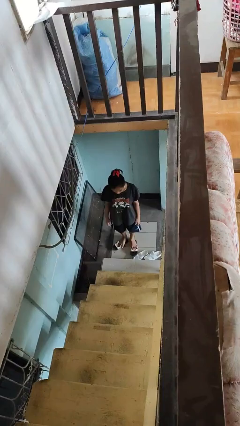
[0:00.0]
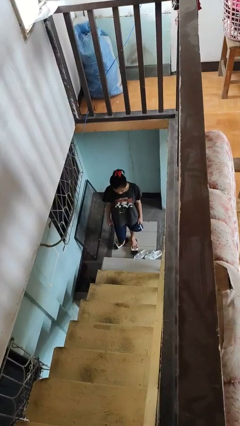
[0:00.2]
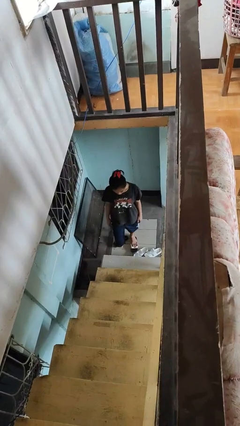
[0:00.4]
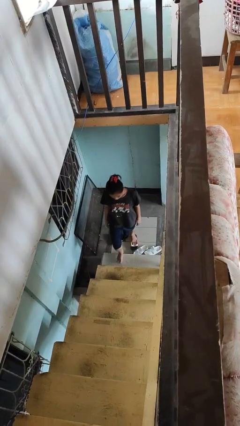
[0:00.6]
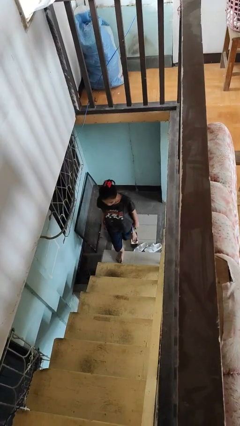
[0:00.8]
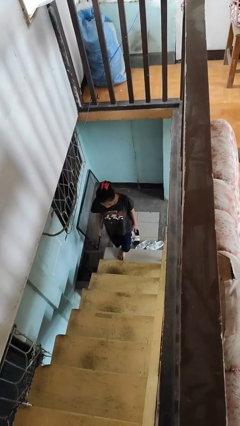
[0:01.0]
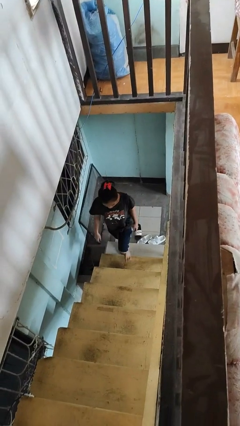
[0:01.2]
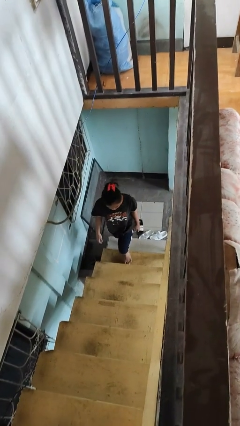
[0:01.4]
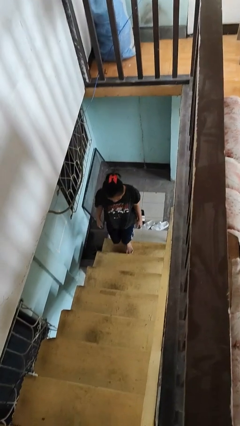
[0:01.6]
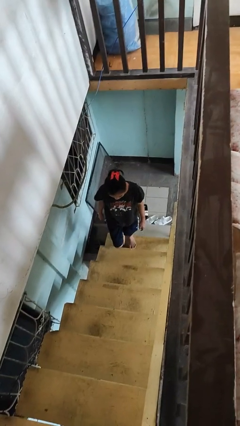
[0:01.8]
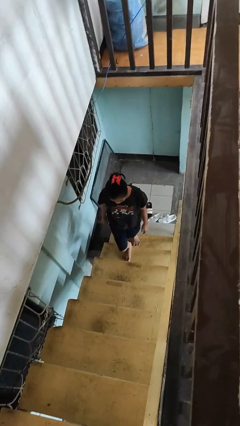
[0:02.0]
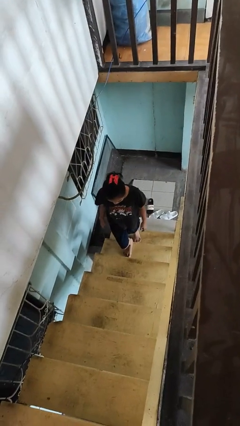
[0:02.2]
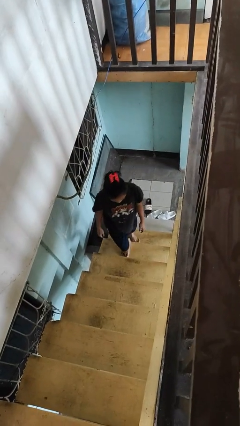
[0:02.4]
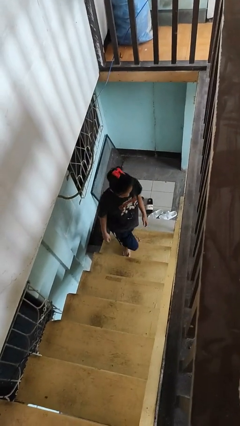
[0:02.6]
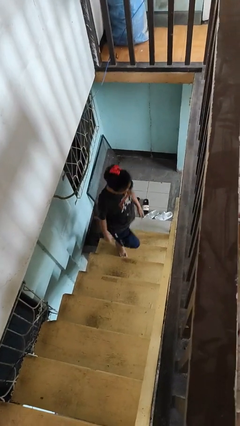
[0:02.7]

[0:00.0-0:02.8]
person climbs up stairs

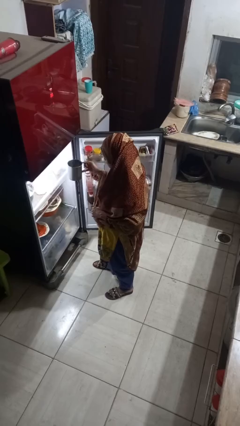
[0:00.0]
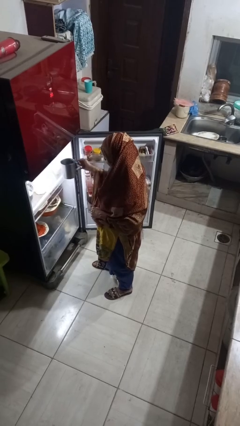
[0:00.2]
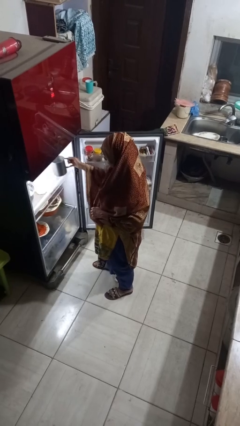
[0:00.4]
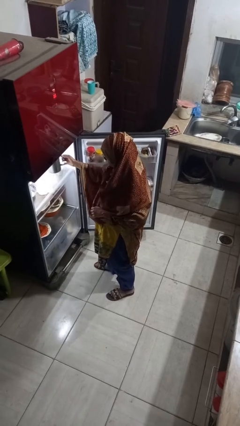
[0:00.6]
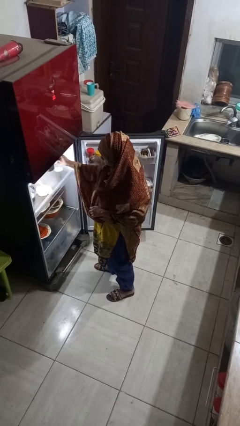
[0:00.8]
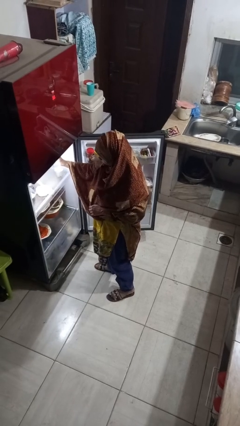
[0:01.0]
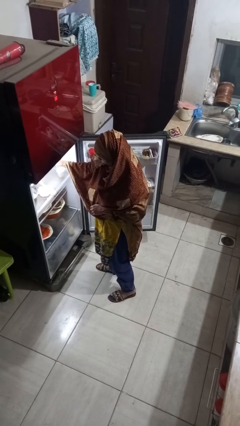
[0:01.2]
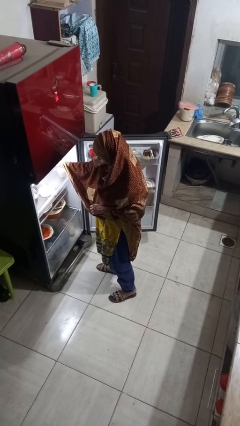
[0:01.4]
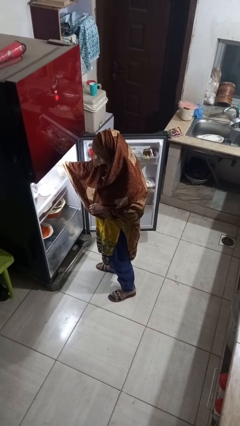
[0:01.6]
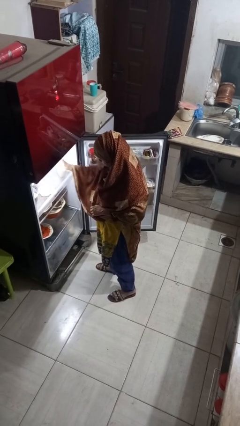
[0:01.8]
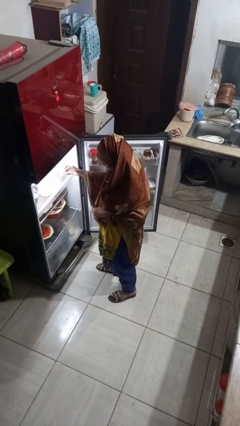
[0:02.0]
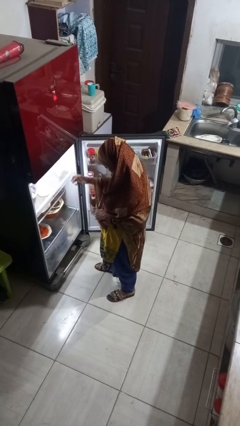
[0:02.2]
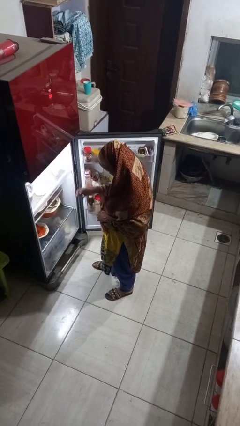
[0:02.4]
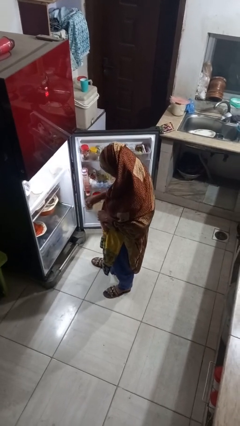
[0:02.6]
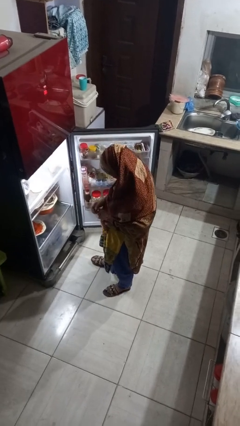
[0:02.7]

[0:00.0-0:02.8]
person puts object into refrigerator

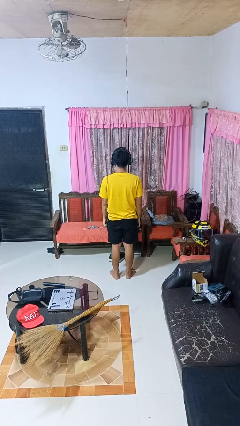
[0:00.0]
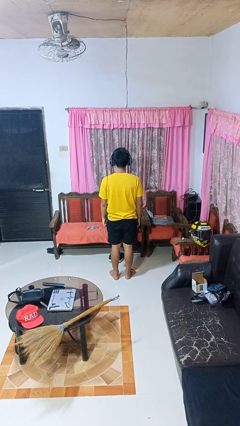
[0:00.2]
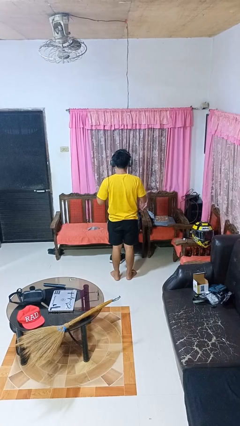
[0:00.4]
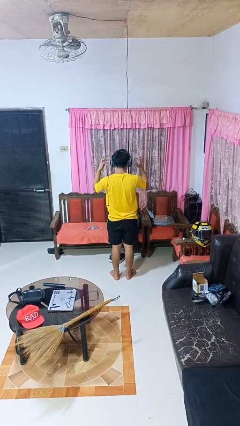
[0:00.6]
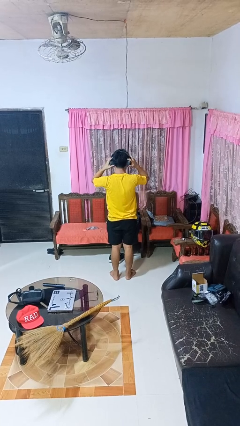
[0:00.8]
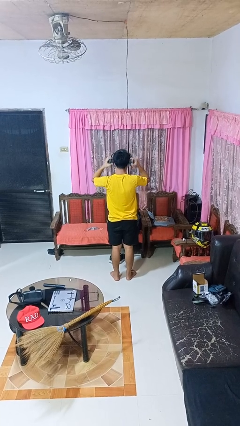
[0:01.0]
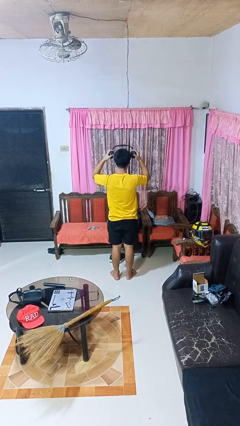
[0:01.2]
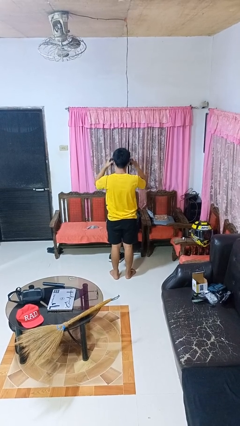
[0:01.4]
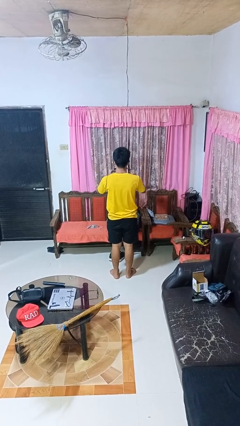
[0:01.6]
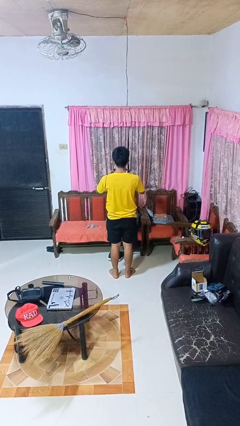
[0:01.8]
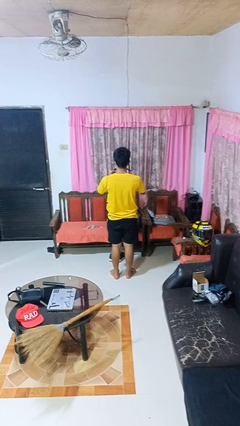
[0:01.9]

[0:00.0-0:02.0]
person takes off headphones

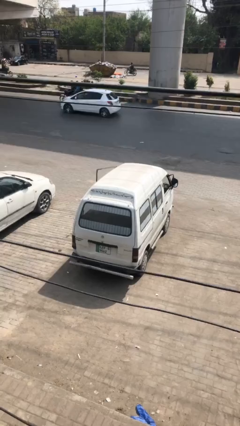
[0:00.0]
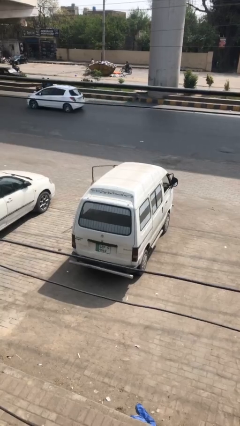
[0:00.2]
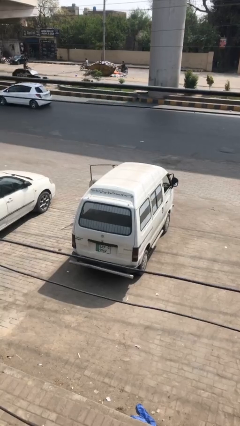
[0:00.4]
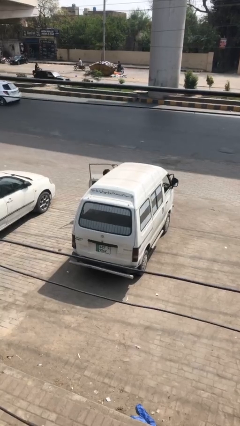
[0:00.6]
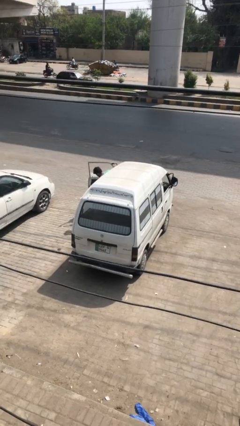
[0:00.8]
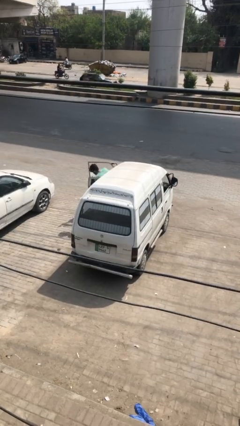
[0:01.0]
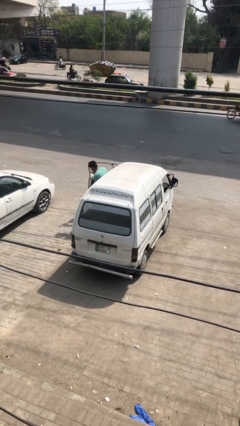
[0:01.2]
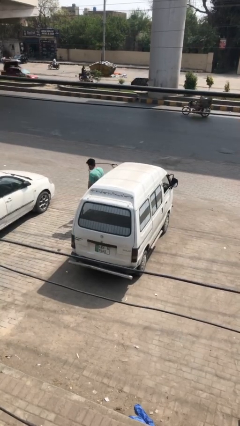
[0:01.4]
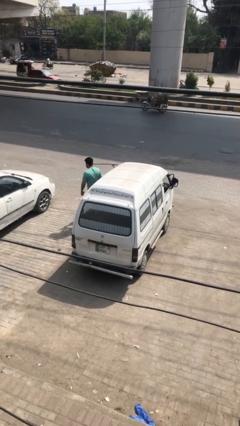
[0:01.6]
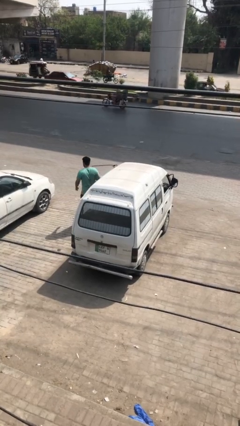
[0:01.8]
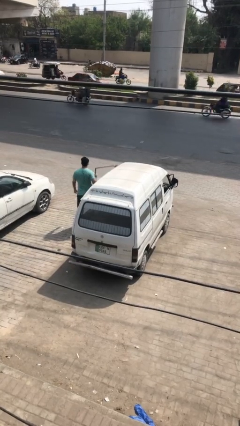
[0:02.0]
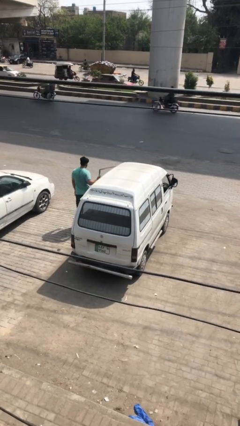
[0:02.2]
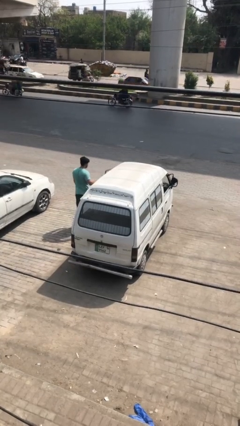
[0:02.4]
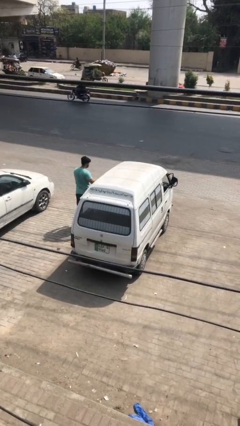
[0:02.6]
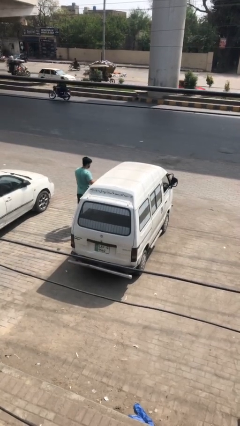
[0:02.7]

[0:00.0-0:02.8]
car drops off person

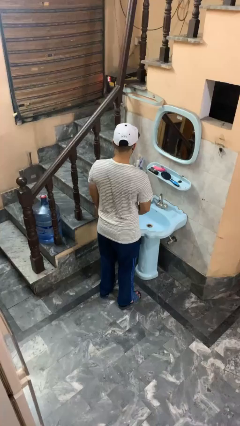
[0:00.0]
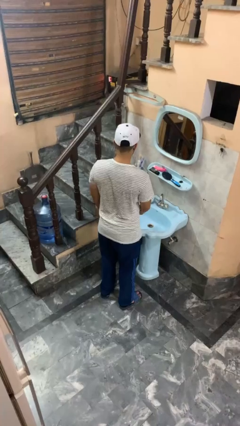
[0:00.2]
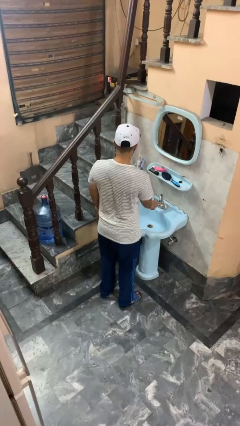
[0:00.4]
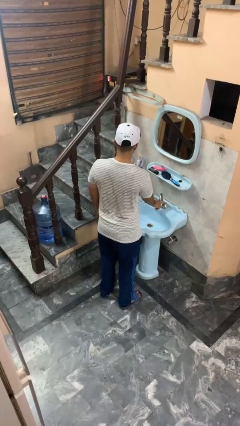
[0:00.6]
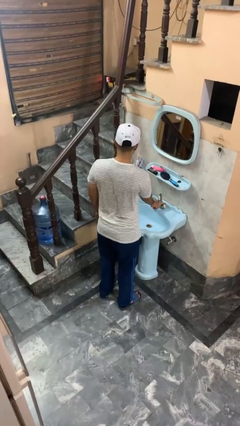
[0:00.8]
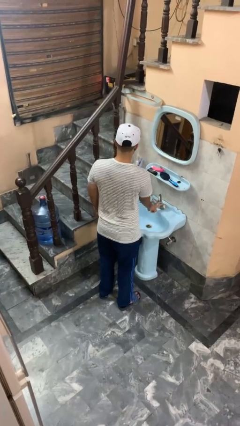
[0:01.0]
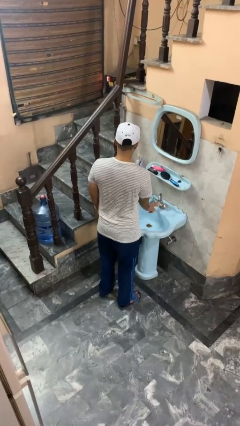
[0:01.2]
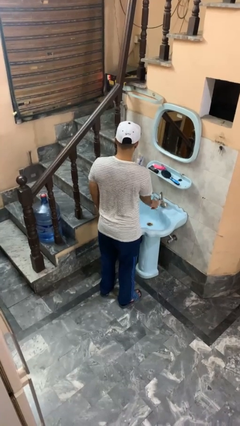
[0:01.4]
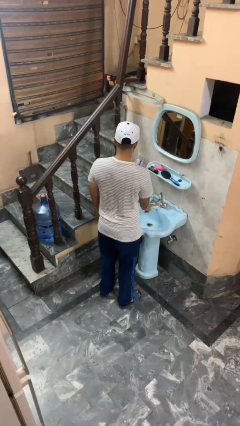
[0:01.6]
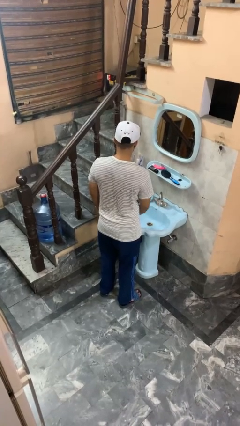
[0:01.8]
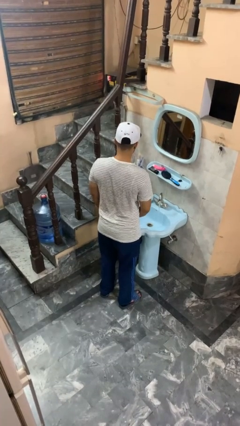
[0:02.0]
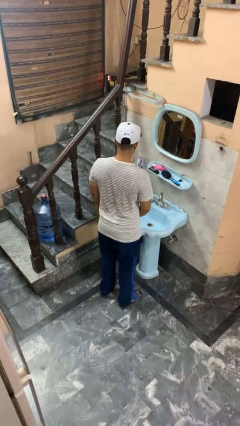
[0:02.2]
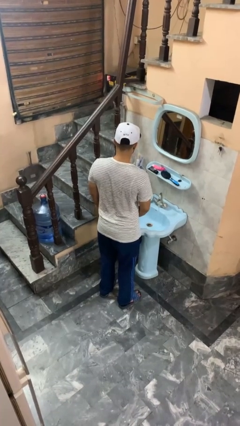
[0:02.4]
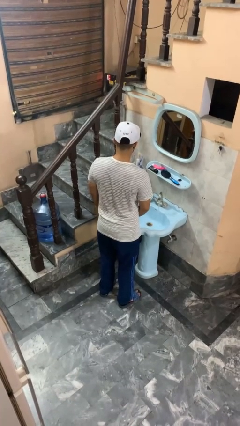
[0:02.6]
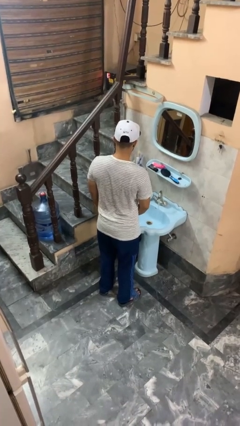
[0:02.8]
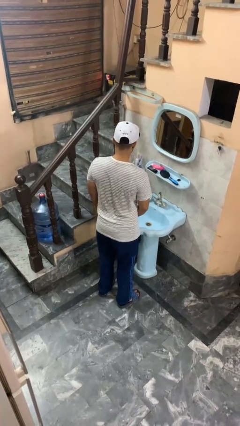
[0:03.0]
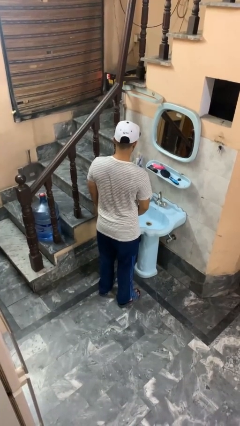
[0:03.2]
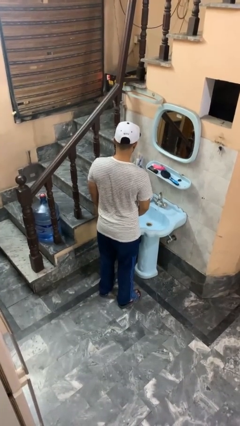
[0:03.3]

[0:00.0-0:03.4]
person turns on faucet

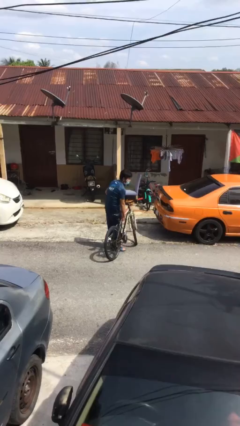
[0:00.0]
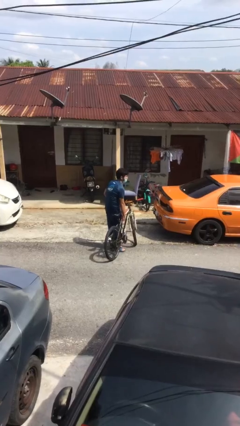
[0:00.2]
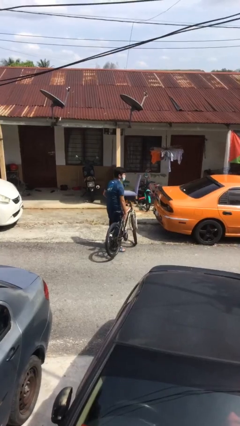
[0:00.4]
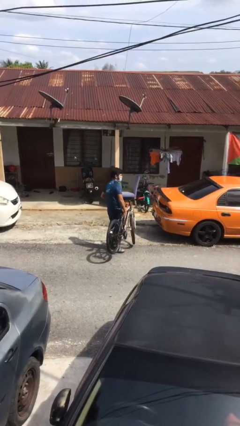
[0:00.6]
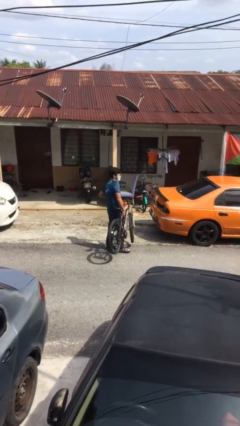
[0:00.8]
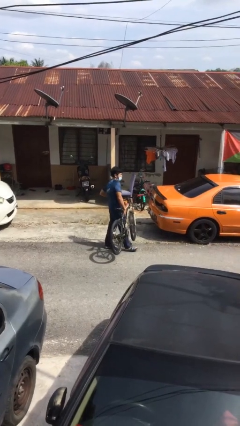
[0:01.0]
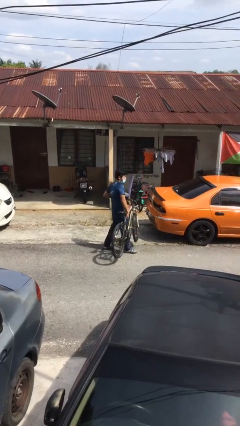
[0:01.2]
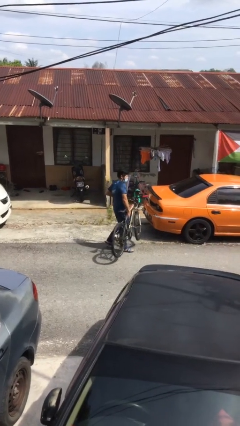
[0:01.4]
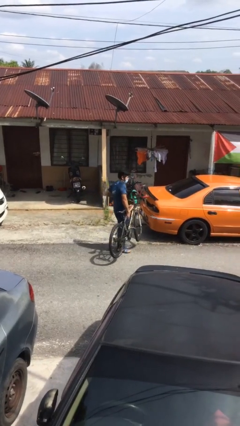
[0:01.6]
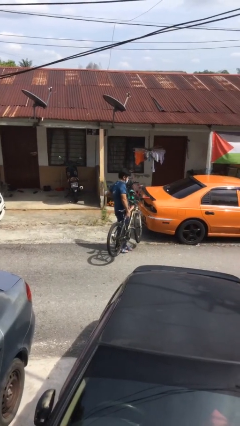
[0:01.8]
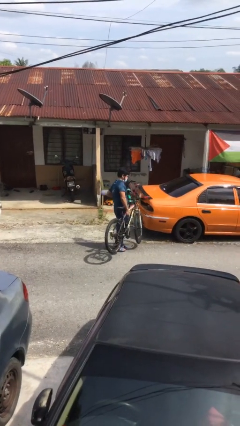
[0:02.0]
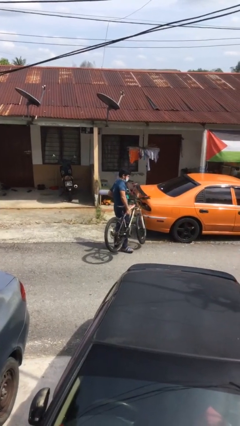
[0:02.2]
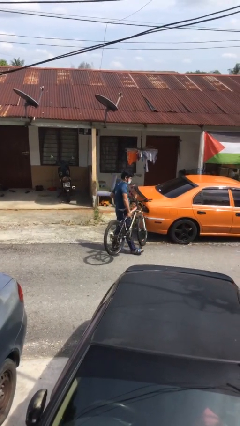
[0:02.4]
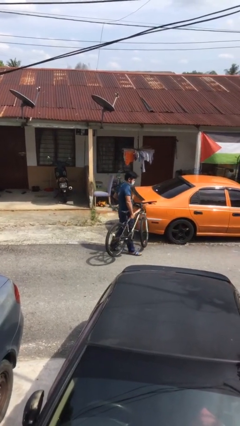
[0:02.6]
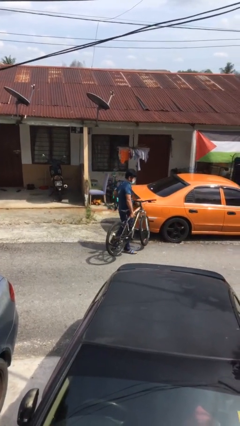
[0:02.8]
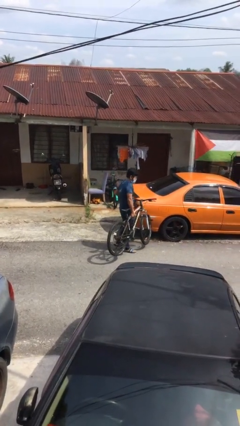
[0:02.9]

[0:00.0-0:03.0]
person carries bicycle

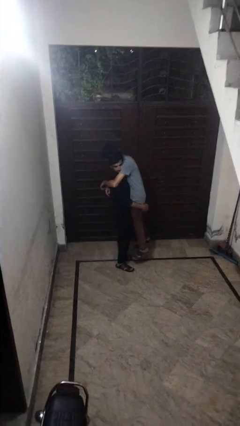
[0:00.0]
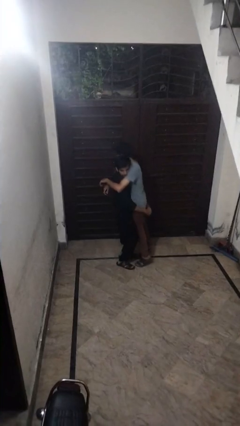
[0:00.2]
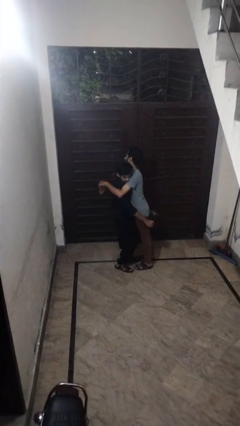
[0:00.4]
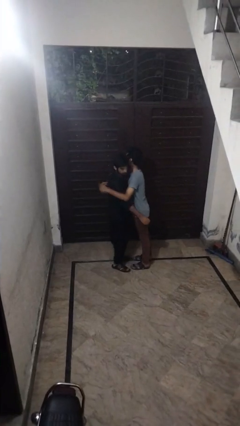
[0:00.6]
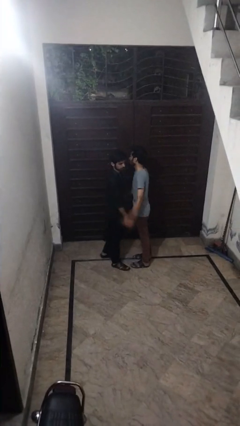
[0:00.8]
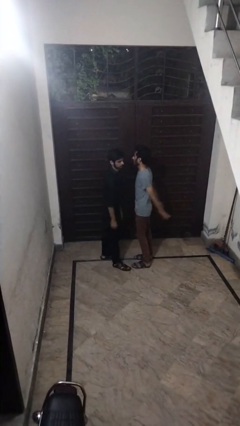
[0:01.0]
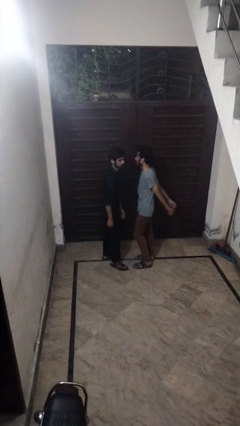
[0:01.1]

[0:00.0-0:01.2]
person puts down person
